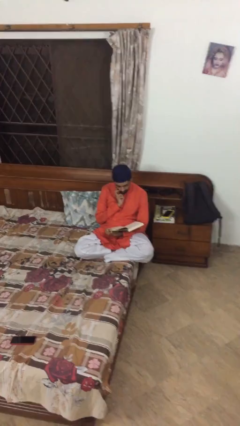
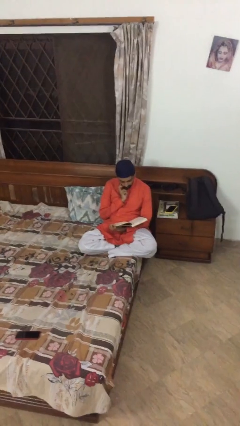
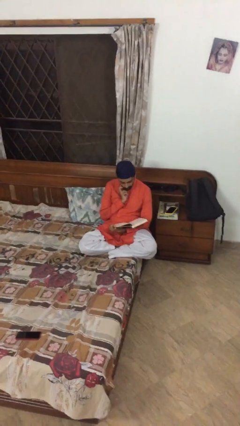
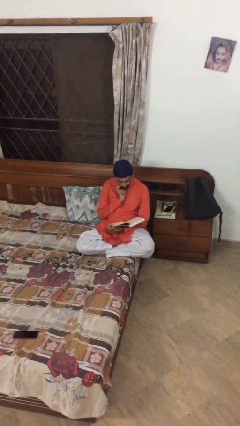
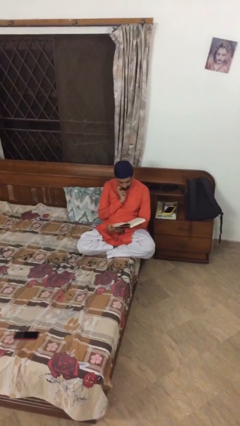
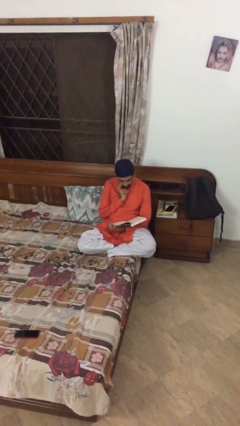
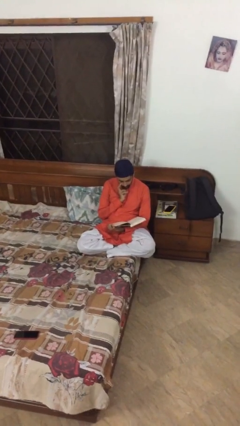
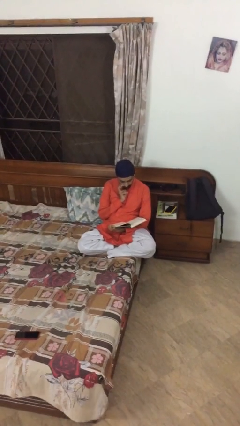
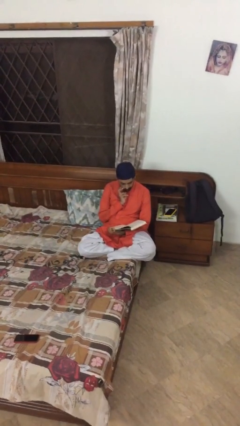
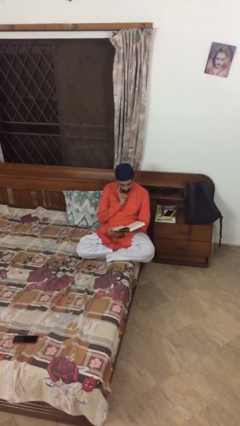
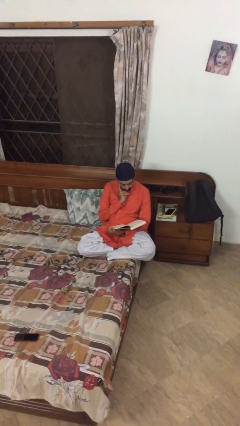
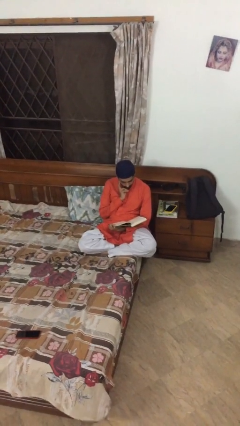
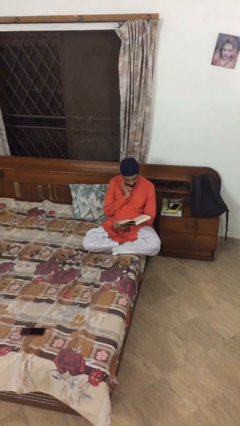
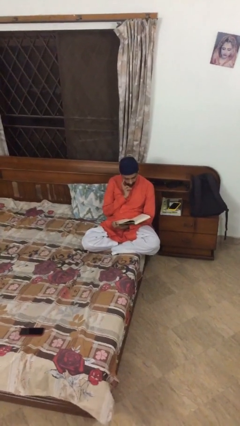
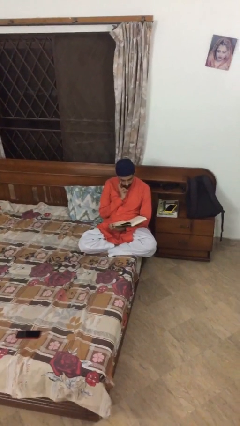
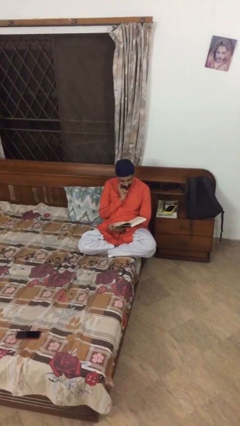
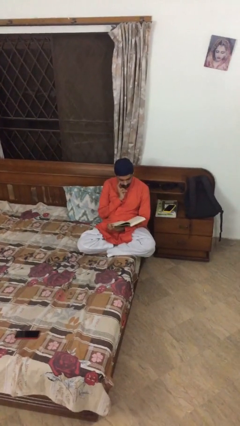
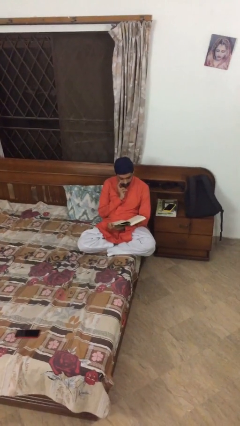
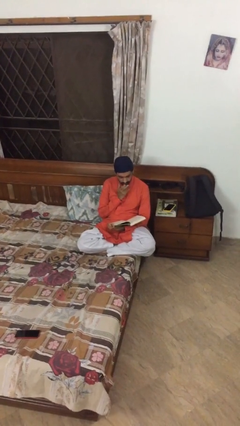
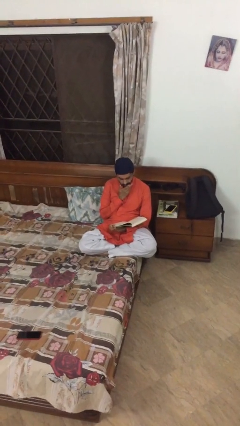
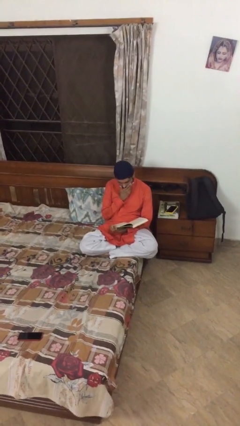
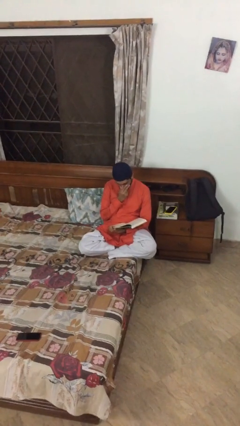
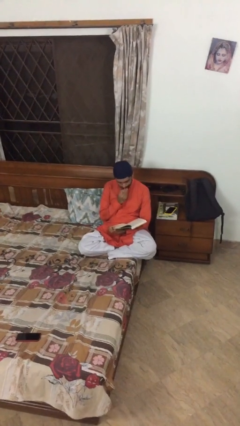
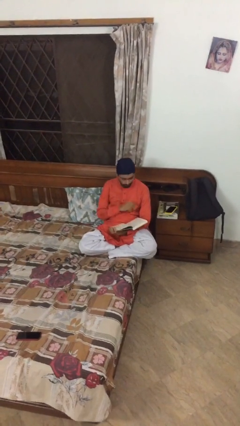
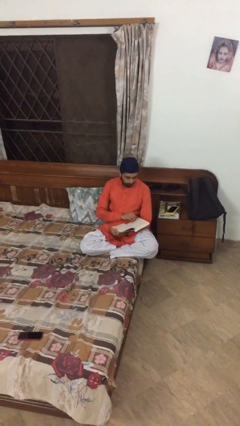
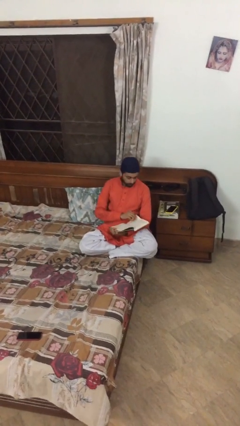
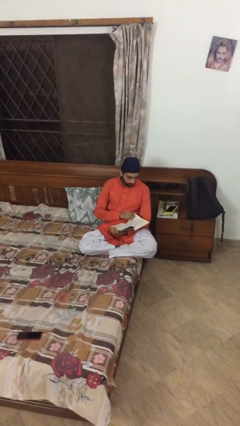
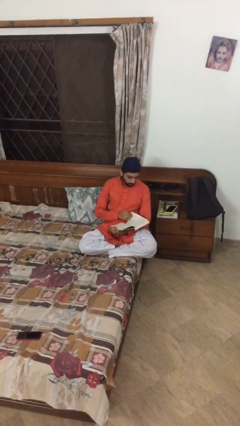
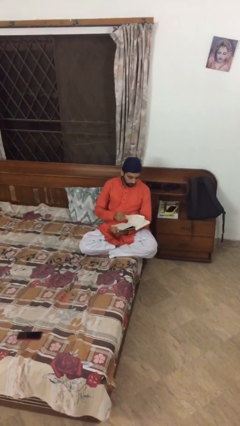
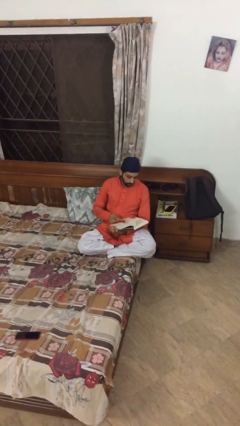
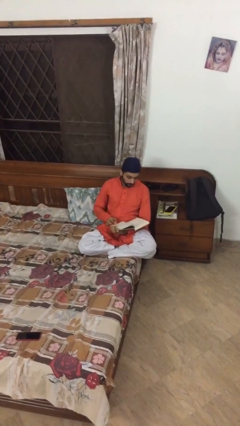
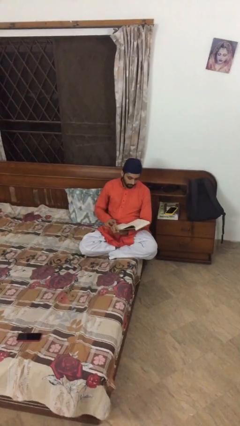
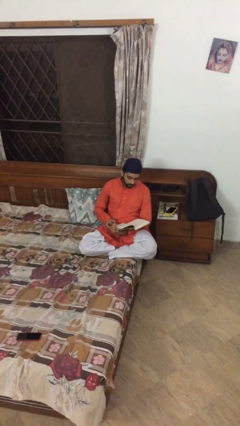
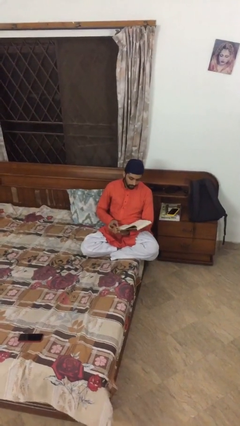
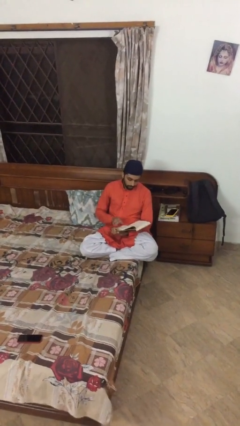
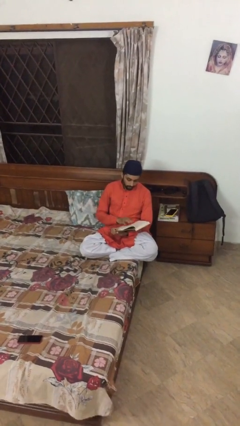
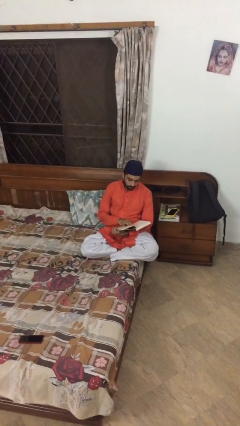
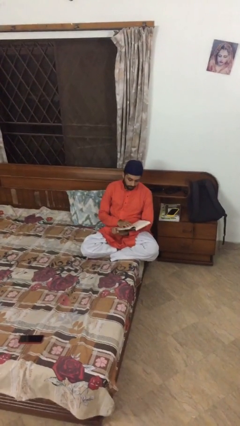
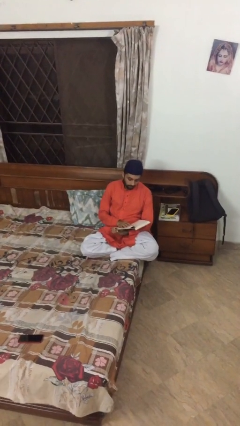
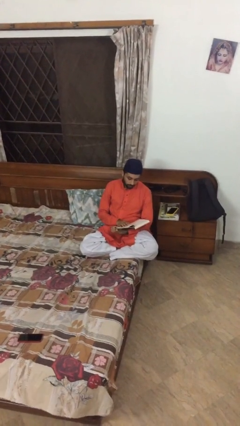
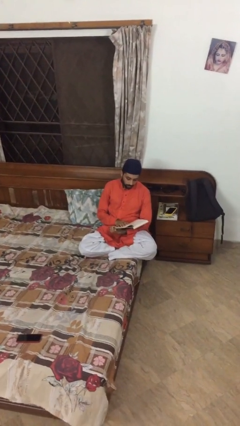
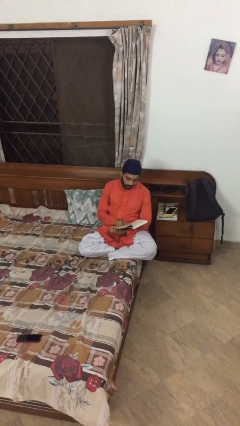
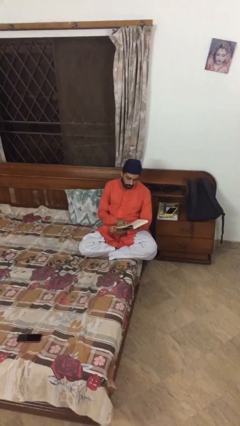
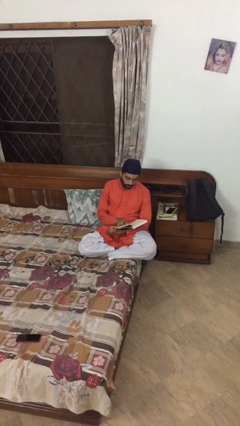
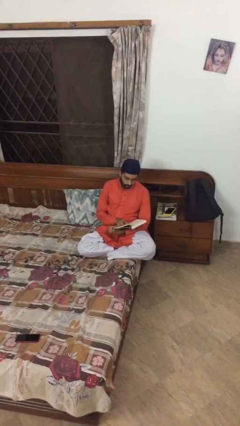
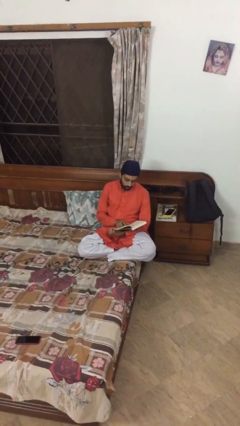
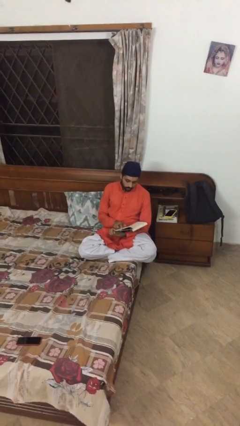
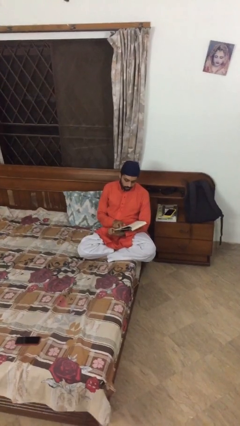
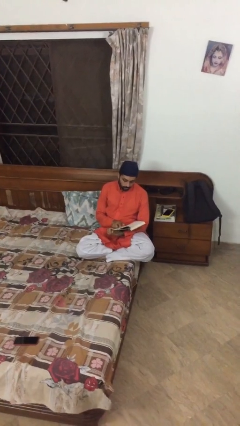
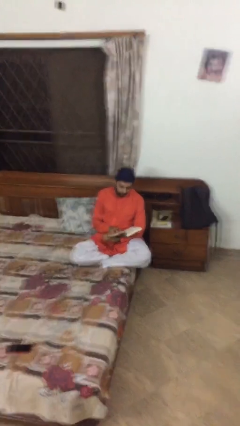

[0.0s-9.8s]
person reads document

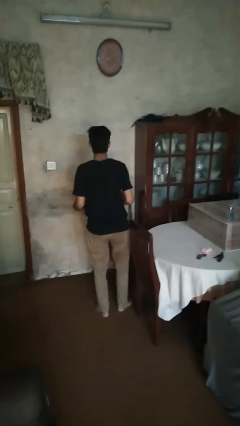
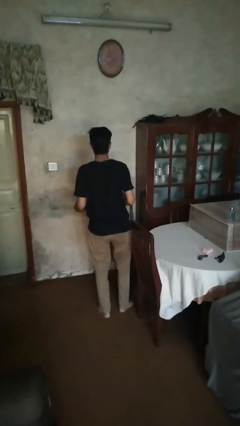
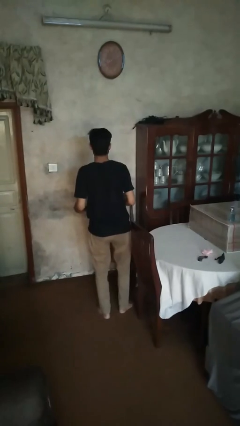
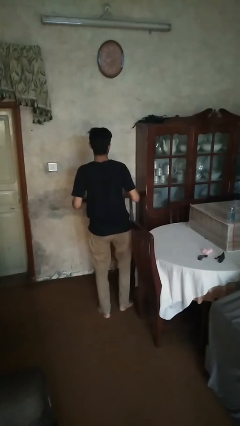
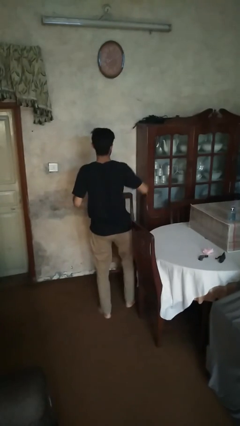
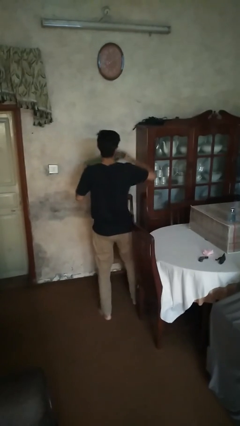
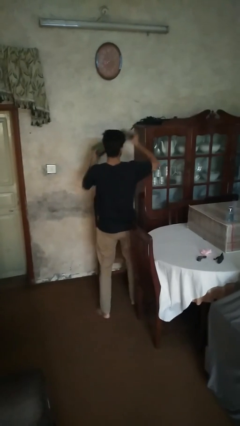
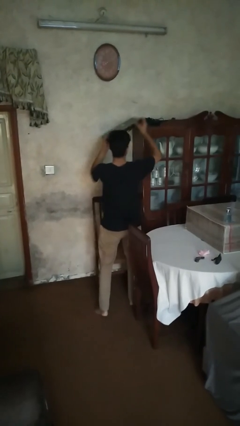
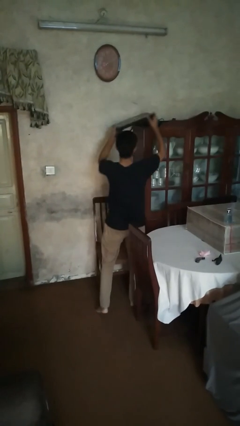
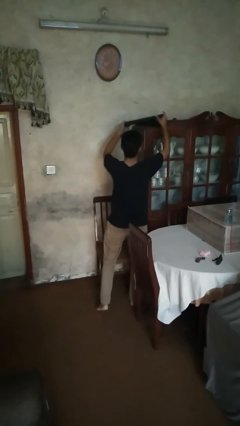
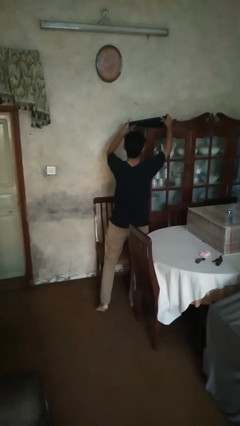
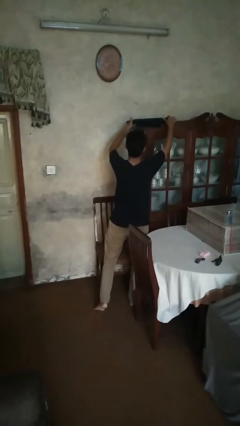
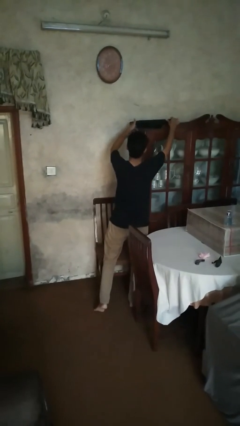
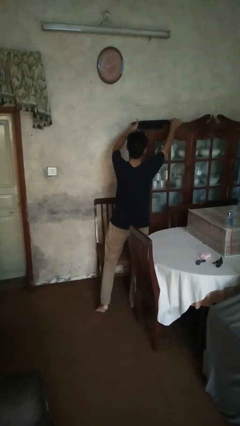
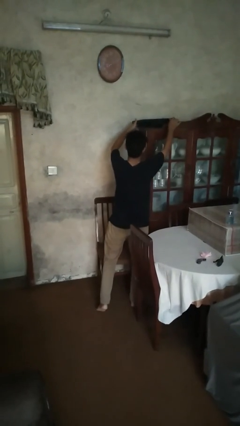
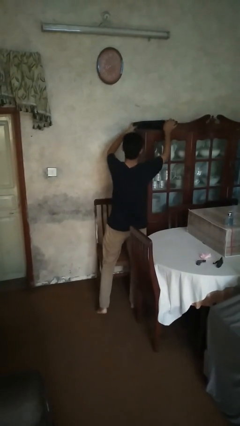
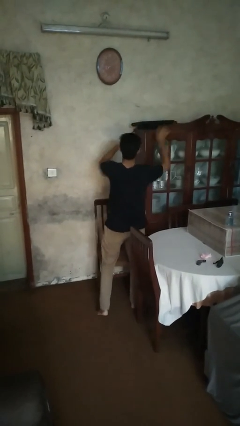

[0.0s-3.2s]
person puts down object into cabinet

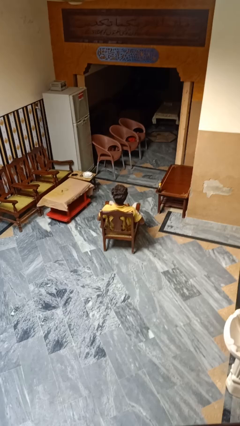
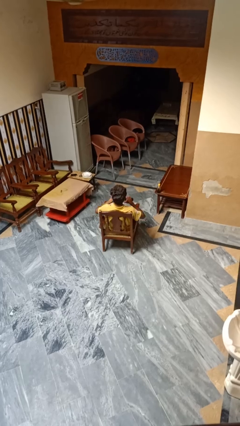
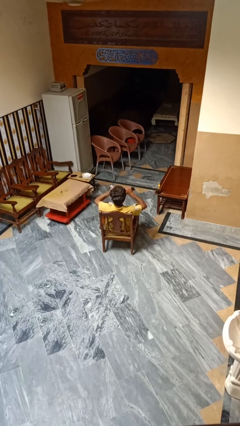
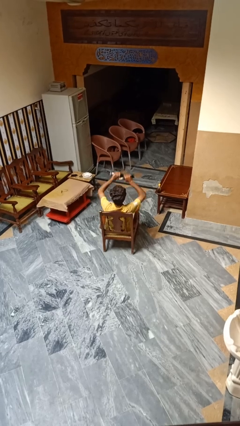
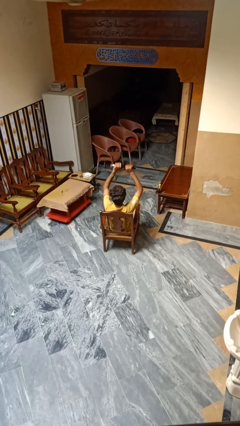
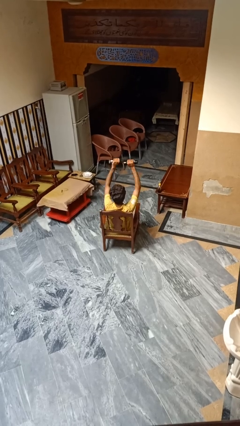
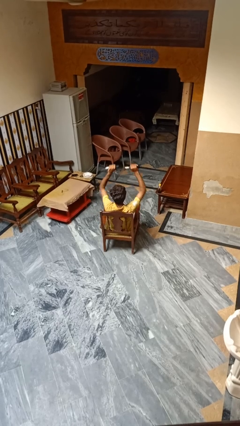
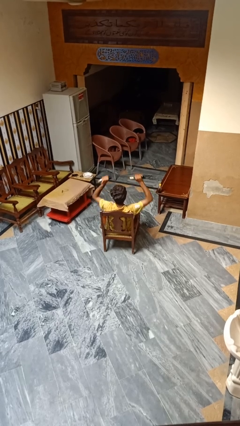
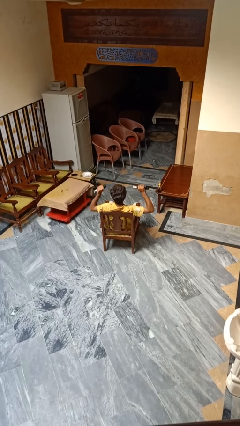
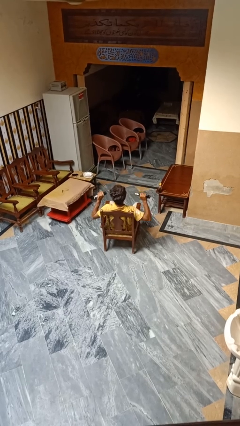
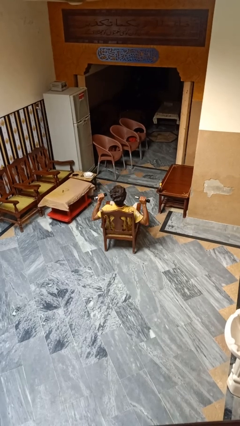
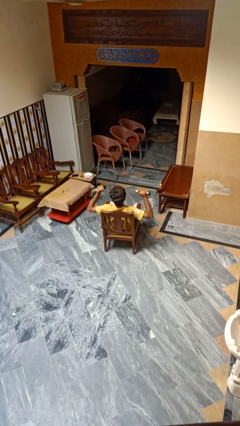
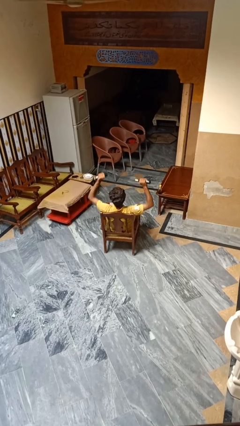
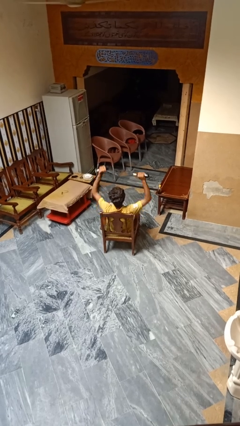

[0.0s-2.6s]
person lifts dumbbells

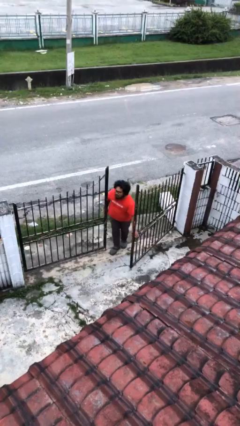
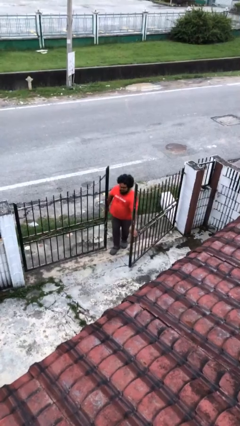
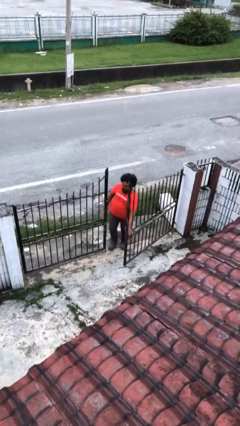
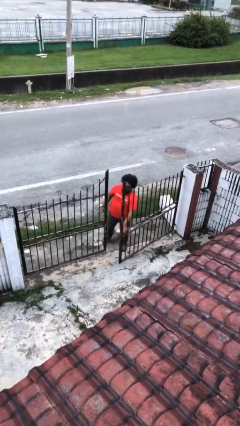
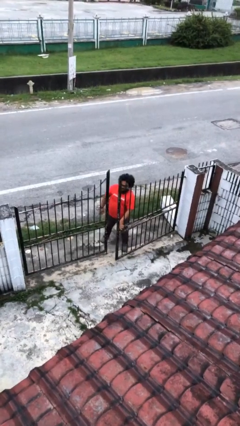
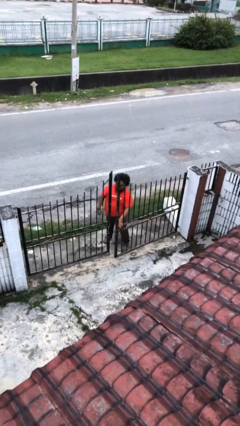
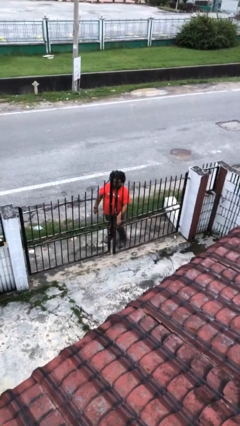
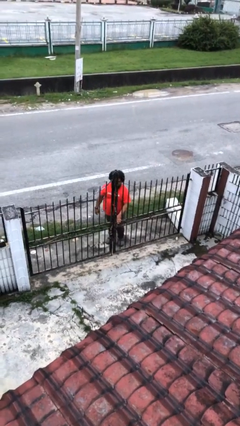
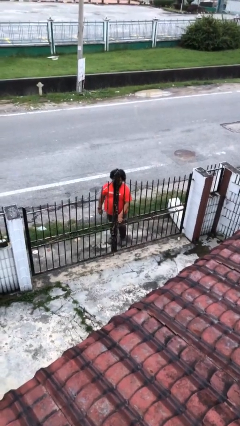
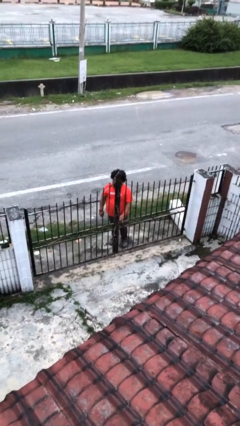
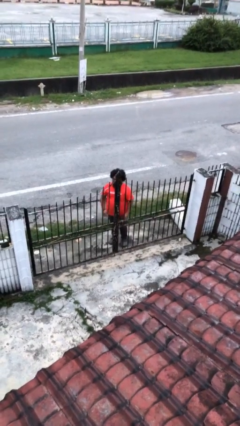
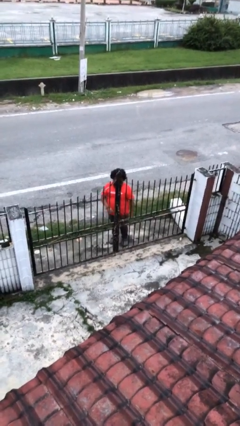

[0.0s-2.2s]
person closes facility door
